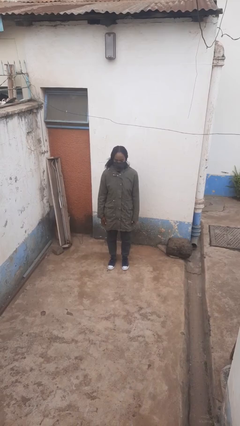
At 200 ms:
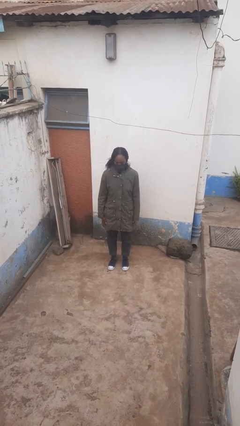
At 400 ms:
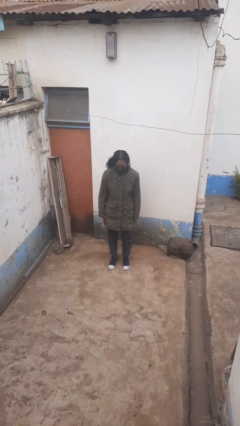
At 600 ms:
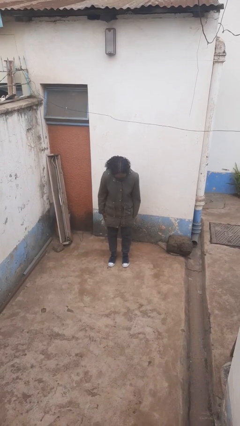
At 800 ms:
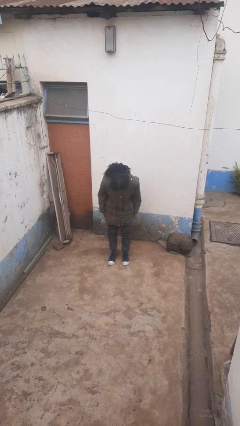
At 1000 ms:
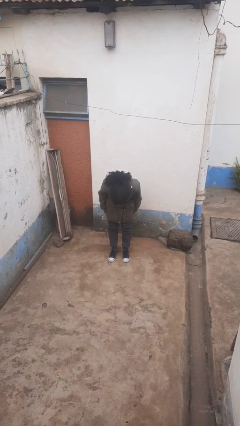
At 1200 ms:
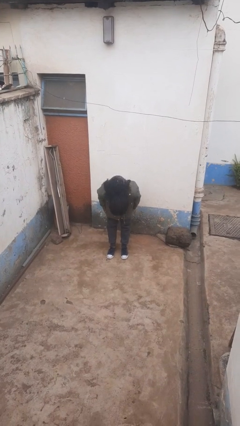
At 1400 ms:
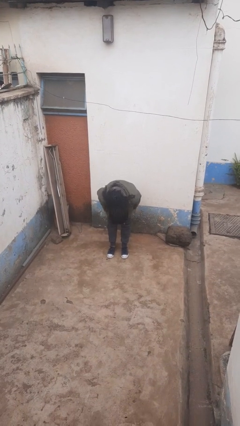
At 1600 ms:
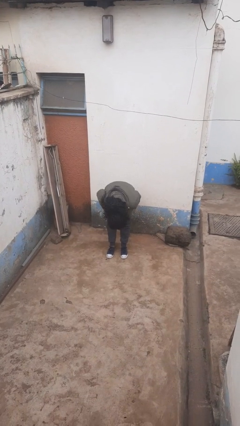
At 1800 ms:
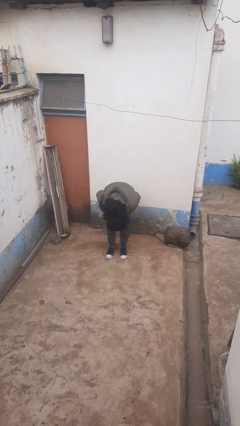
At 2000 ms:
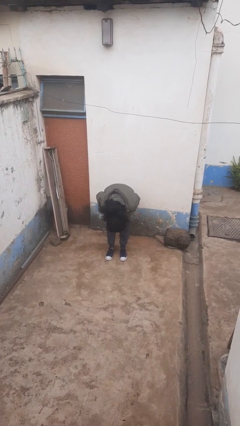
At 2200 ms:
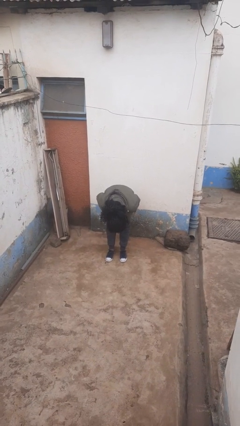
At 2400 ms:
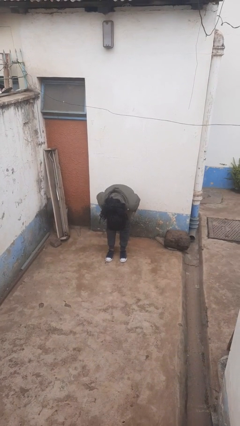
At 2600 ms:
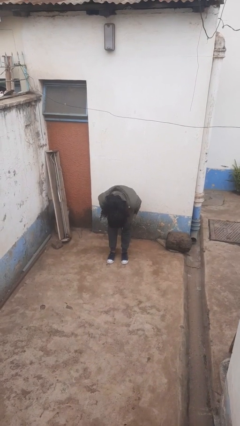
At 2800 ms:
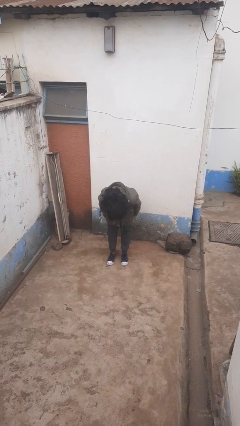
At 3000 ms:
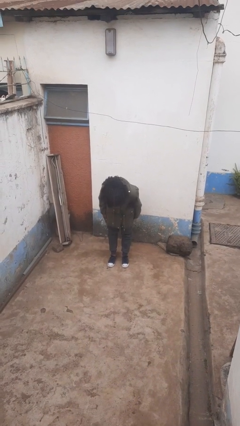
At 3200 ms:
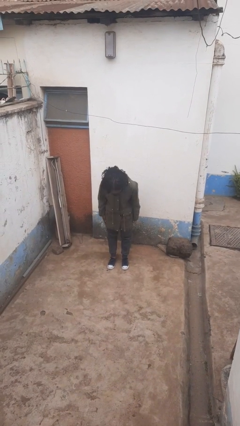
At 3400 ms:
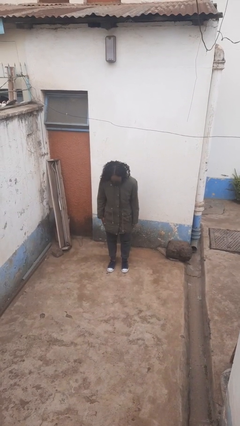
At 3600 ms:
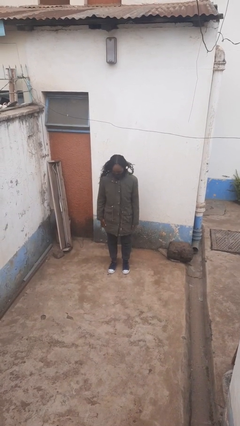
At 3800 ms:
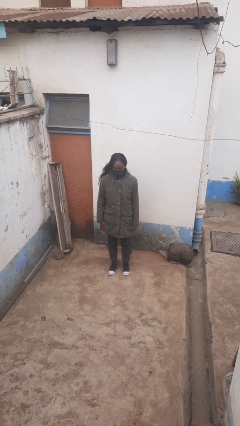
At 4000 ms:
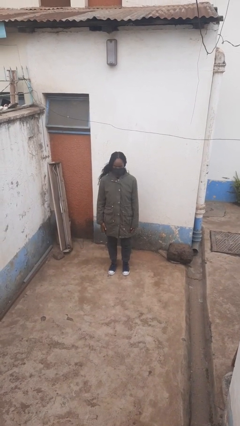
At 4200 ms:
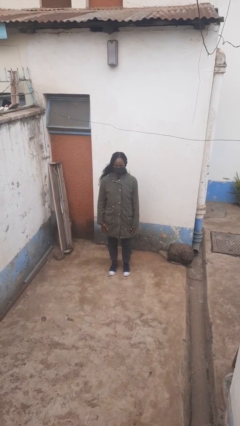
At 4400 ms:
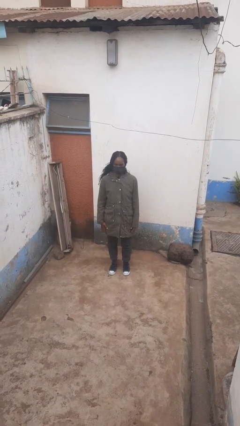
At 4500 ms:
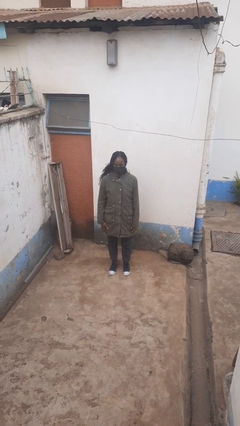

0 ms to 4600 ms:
person bows

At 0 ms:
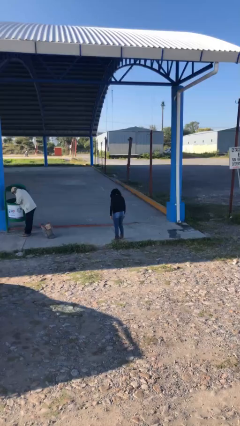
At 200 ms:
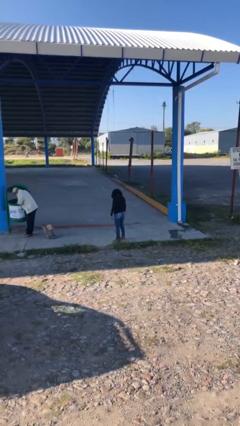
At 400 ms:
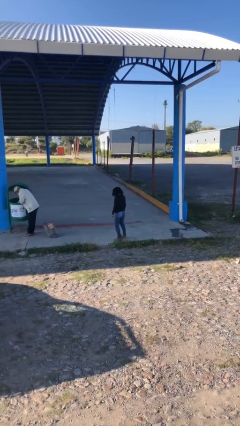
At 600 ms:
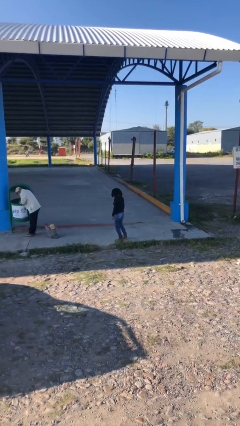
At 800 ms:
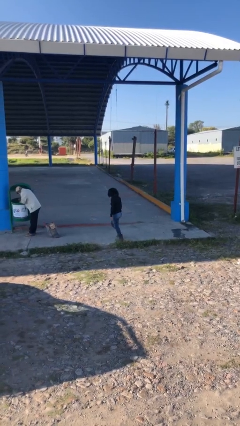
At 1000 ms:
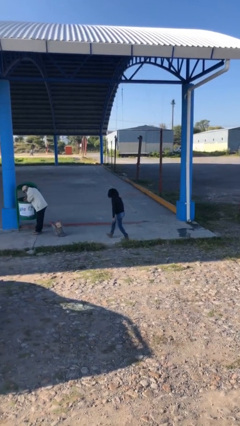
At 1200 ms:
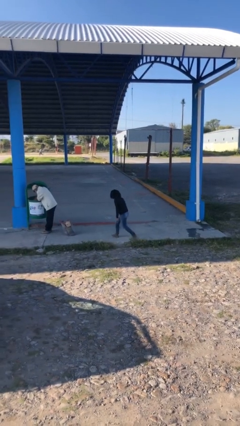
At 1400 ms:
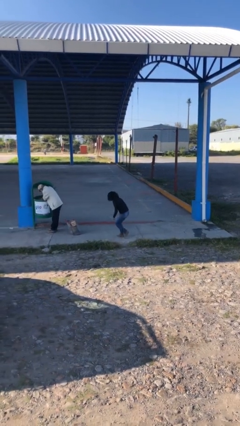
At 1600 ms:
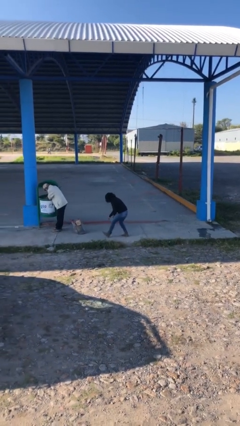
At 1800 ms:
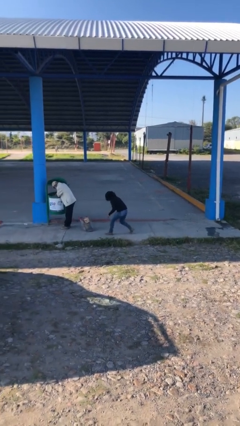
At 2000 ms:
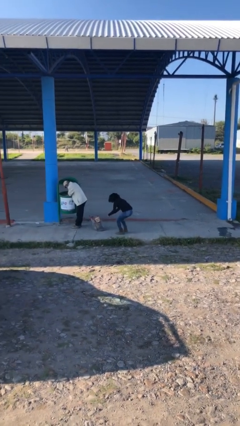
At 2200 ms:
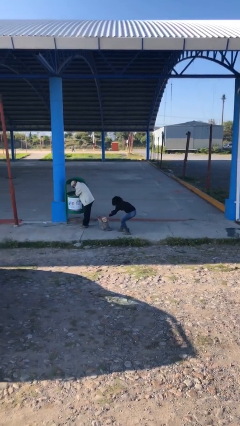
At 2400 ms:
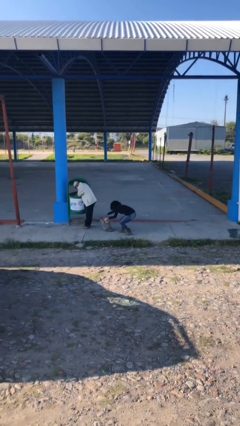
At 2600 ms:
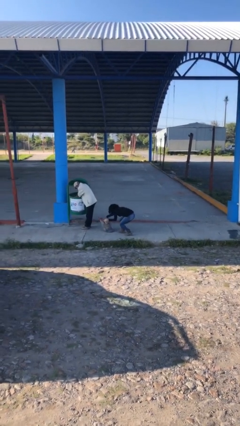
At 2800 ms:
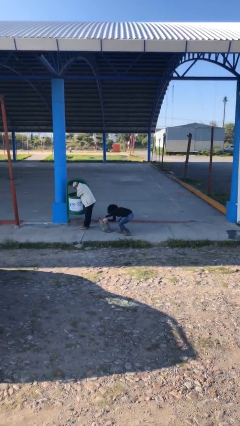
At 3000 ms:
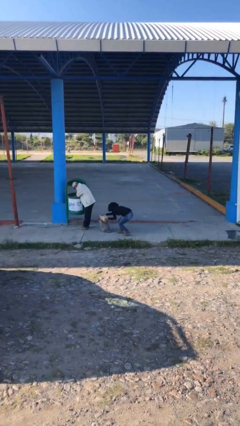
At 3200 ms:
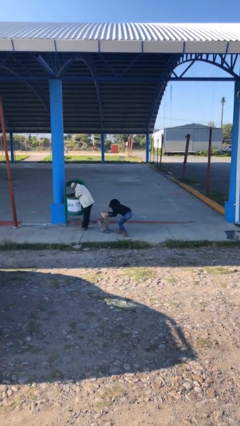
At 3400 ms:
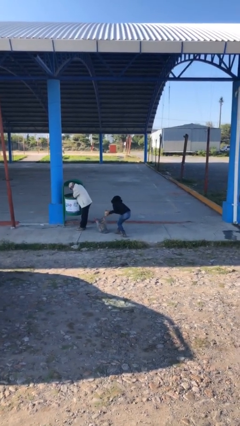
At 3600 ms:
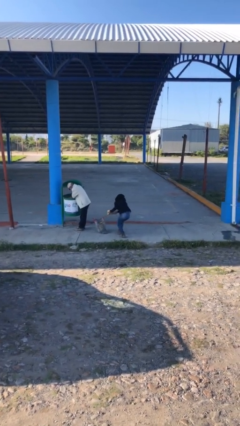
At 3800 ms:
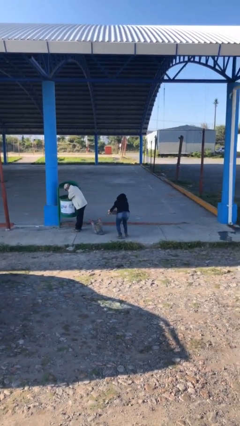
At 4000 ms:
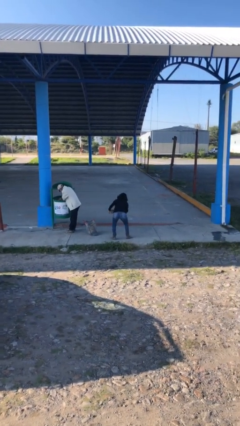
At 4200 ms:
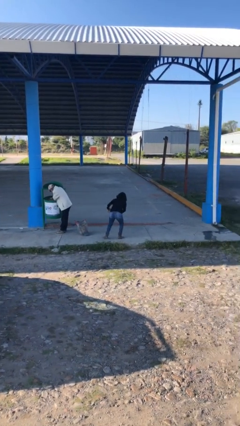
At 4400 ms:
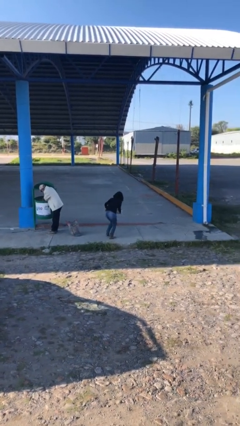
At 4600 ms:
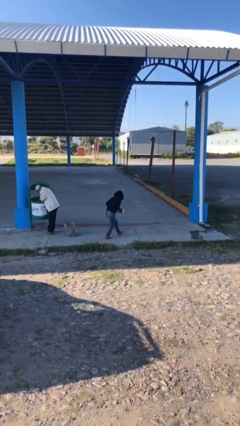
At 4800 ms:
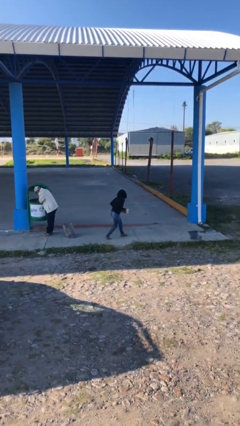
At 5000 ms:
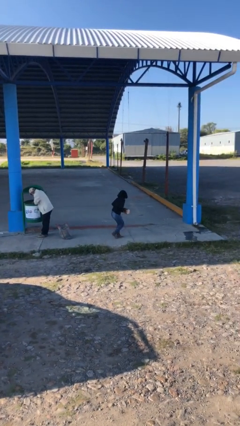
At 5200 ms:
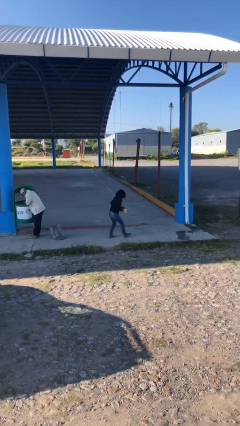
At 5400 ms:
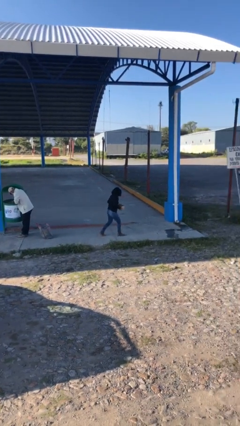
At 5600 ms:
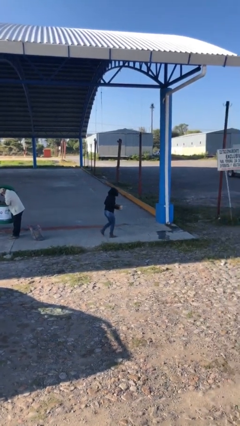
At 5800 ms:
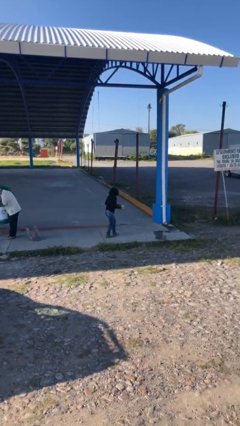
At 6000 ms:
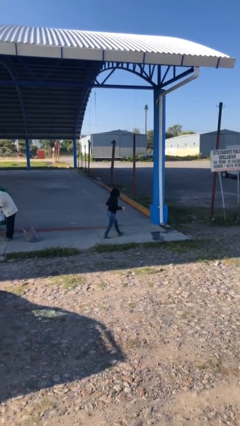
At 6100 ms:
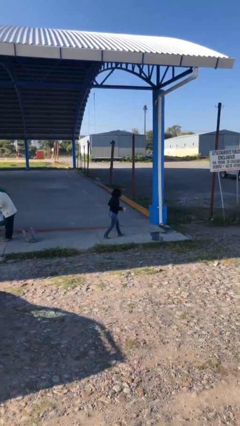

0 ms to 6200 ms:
person steals object from person

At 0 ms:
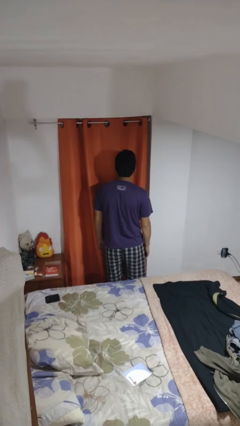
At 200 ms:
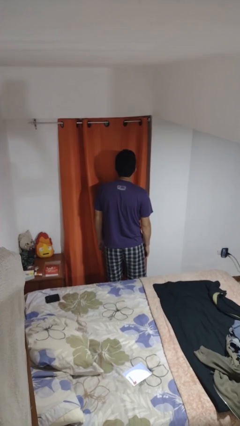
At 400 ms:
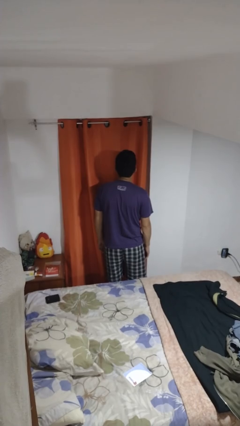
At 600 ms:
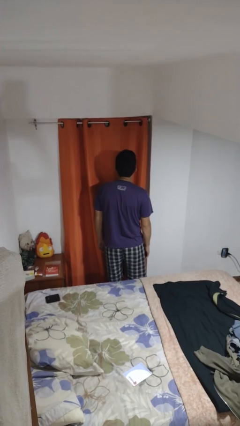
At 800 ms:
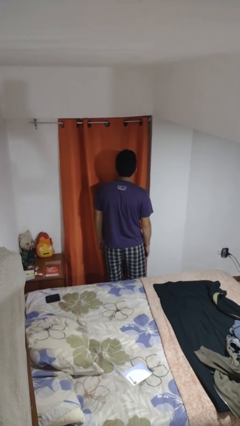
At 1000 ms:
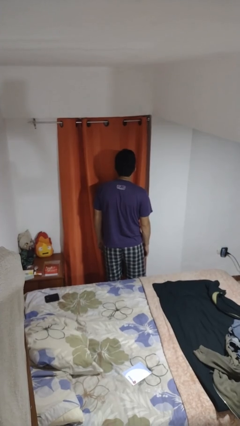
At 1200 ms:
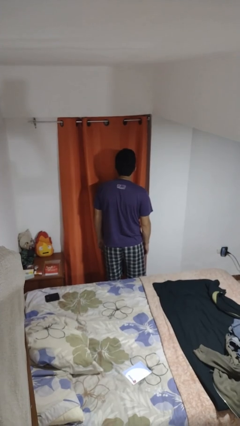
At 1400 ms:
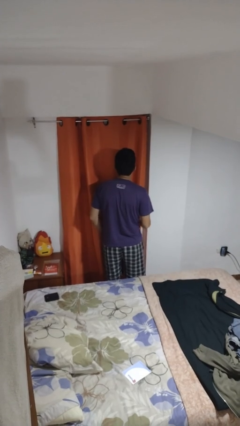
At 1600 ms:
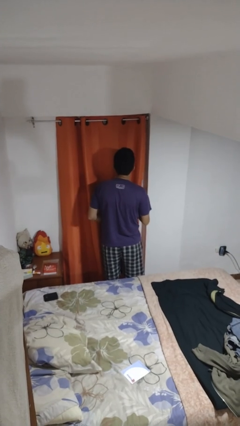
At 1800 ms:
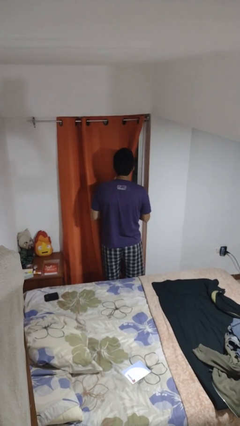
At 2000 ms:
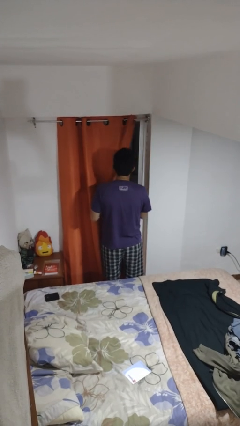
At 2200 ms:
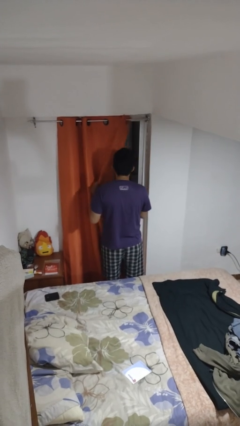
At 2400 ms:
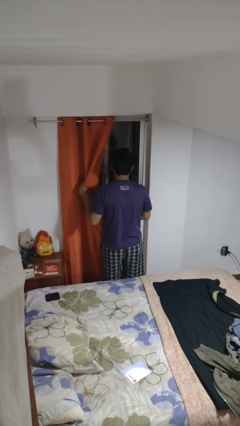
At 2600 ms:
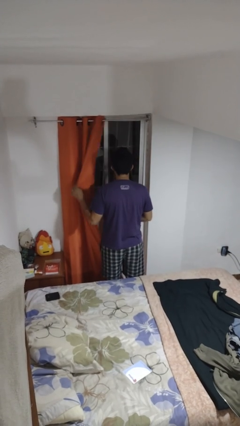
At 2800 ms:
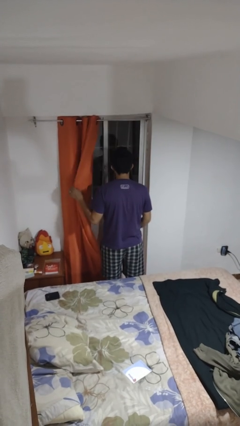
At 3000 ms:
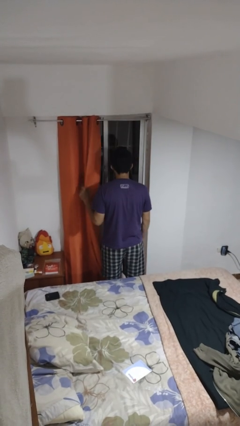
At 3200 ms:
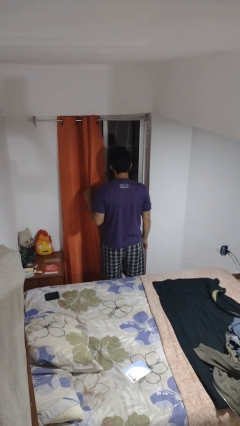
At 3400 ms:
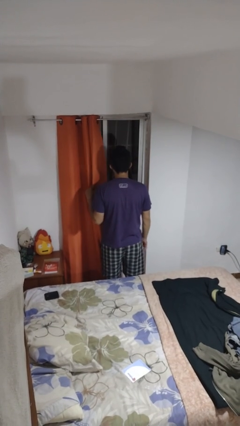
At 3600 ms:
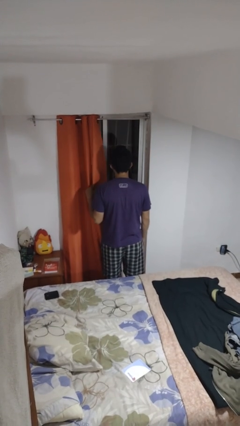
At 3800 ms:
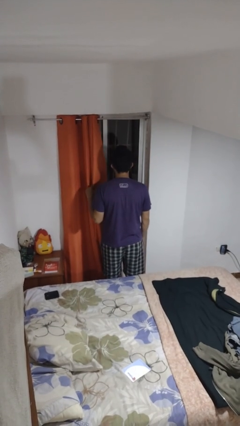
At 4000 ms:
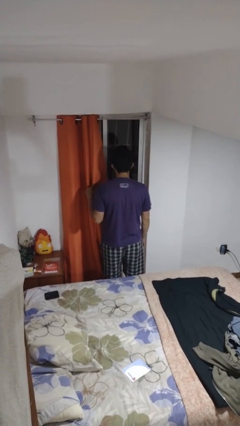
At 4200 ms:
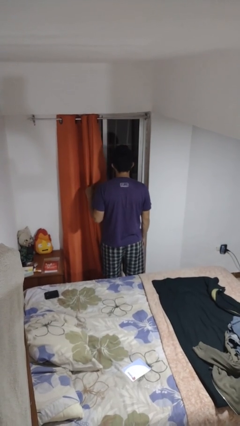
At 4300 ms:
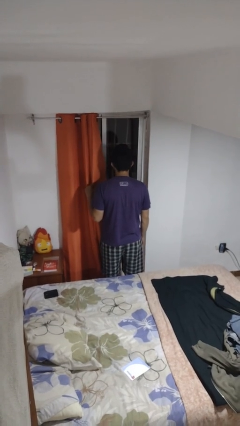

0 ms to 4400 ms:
person opens curtains

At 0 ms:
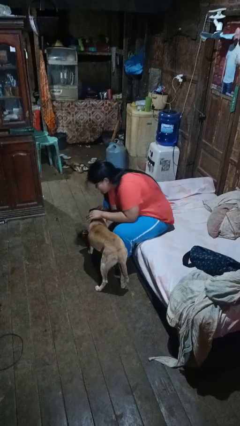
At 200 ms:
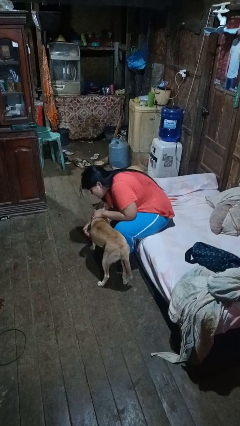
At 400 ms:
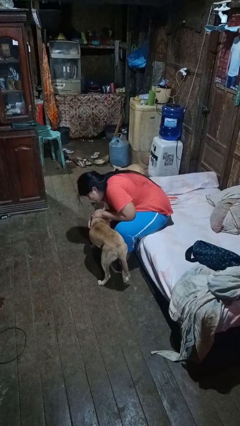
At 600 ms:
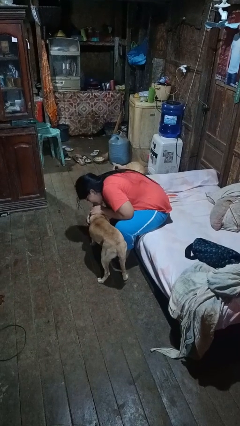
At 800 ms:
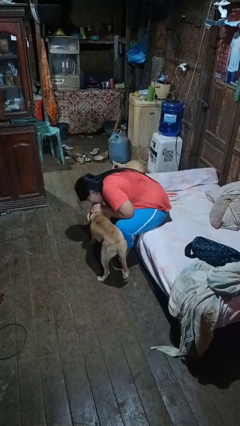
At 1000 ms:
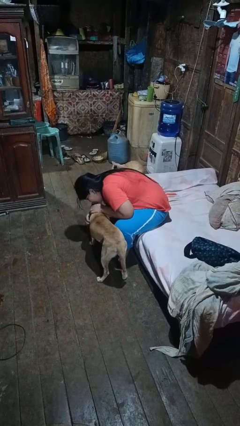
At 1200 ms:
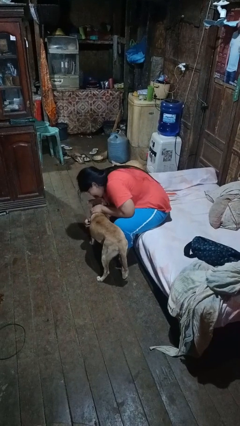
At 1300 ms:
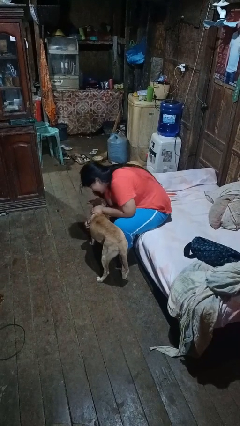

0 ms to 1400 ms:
person hugs dog

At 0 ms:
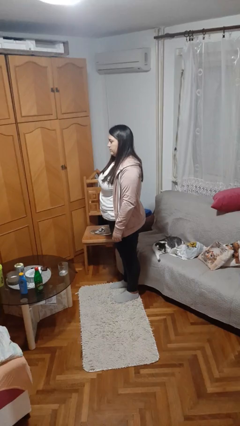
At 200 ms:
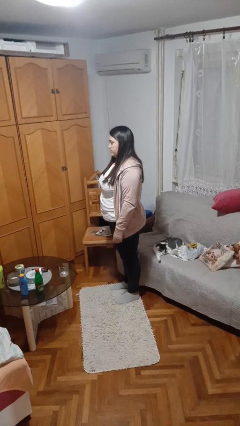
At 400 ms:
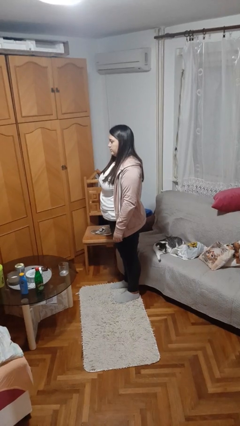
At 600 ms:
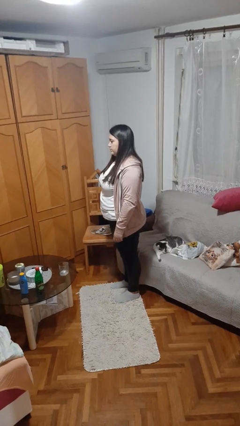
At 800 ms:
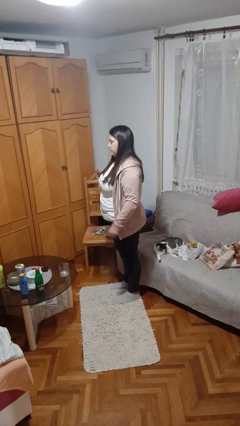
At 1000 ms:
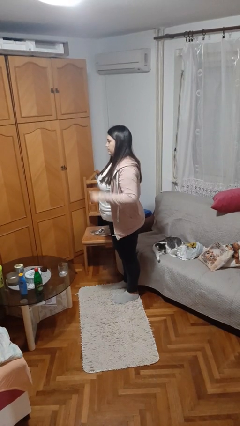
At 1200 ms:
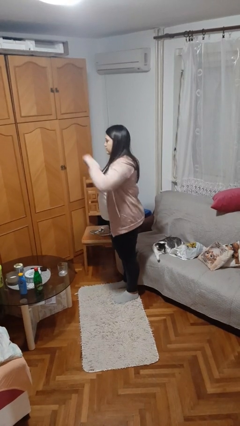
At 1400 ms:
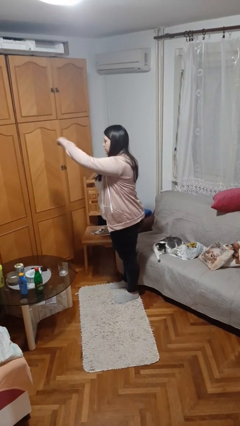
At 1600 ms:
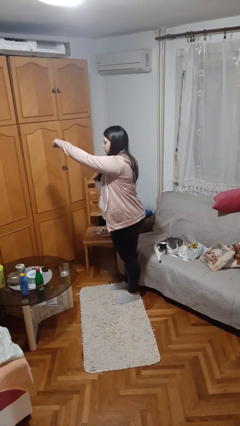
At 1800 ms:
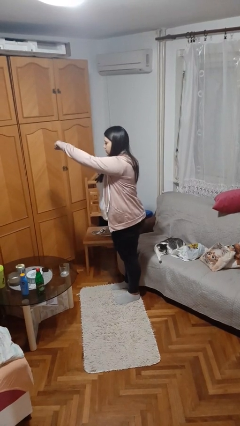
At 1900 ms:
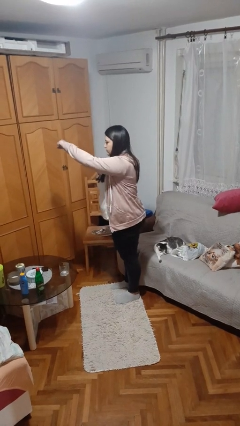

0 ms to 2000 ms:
person punches
